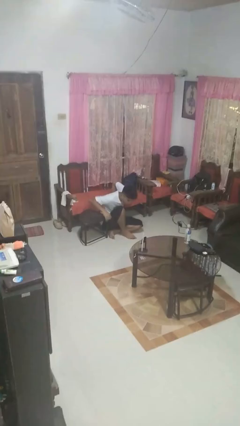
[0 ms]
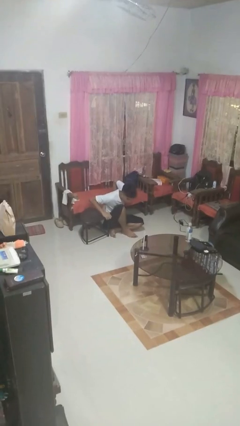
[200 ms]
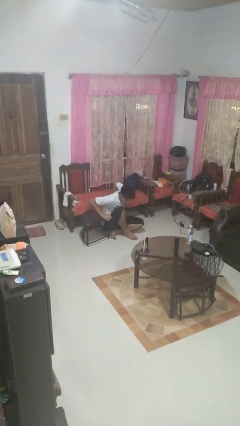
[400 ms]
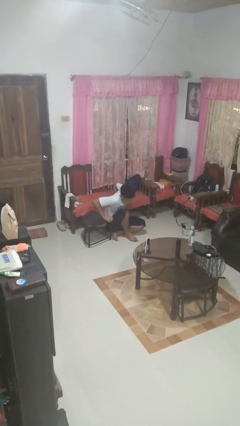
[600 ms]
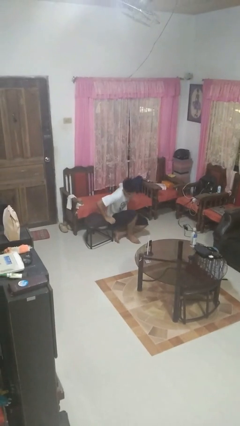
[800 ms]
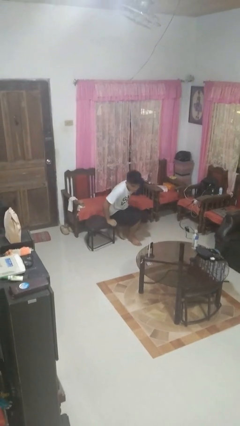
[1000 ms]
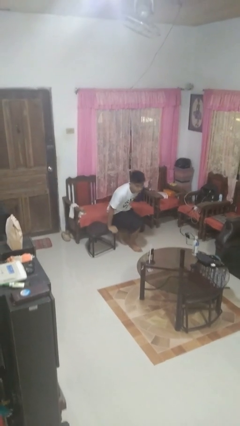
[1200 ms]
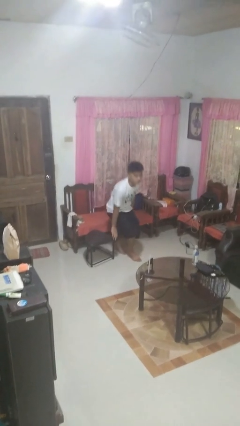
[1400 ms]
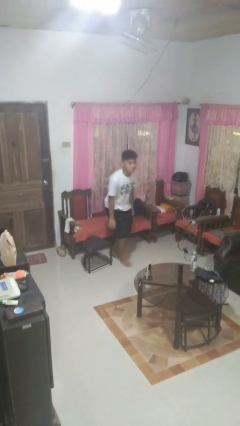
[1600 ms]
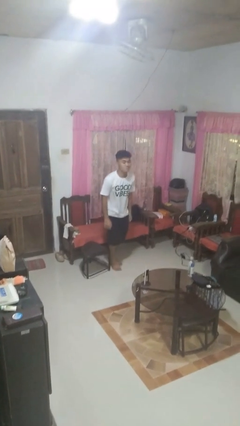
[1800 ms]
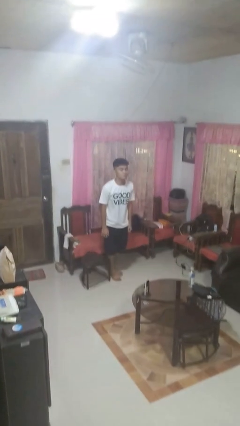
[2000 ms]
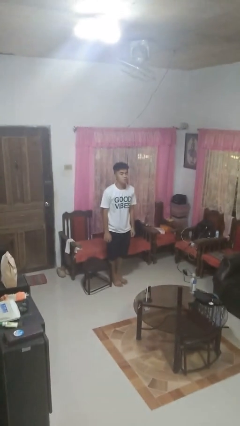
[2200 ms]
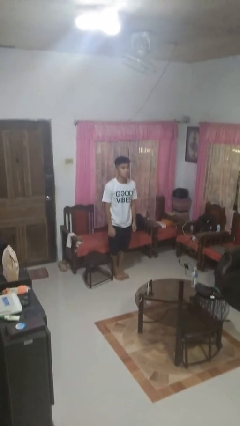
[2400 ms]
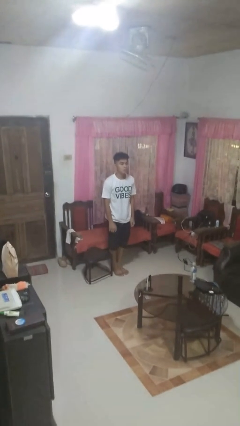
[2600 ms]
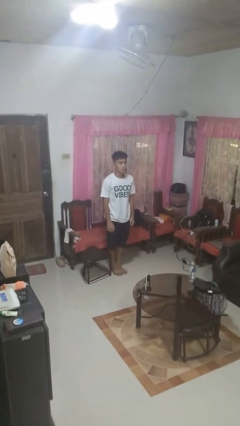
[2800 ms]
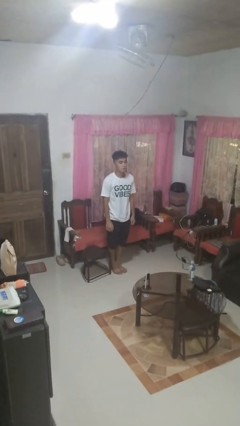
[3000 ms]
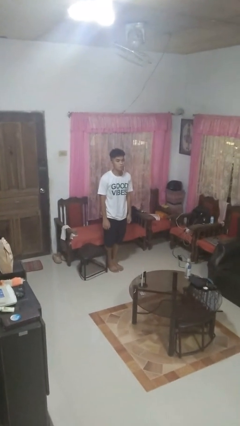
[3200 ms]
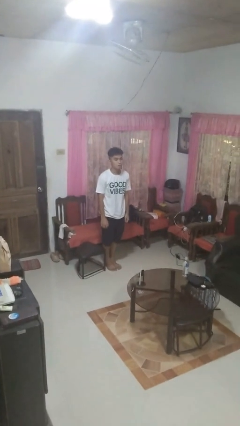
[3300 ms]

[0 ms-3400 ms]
person stands up from floor

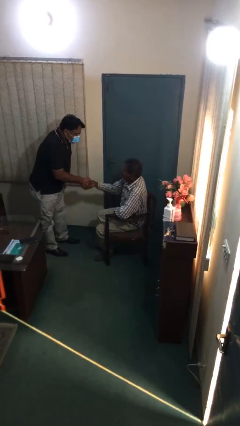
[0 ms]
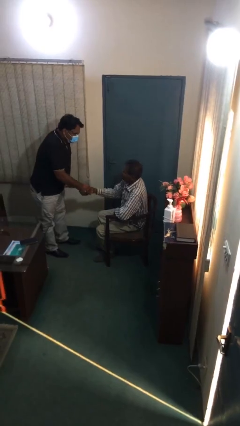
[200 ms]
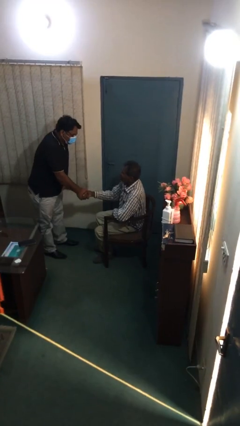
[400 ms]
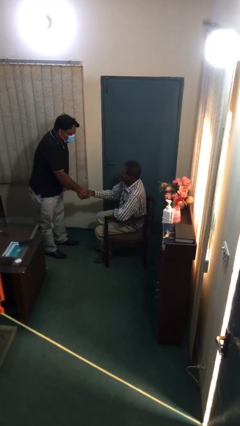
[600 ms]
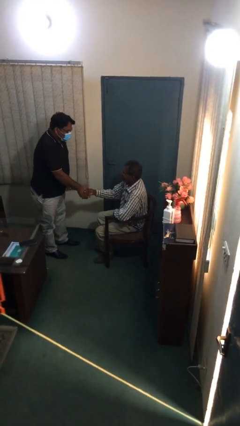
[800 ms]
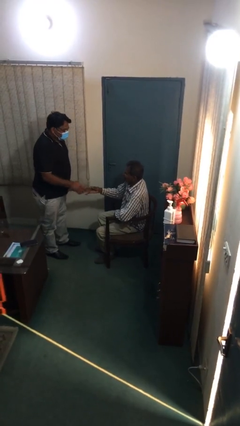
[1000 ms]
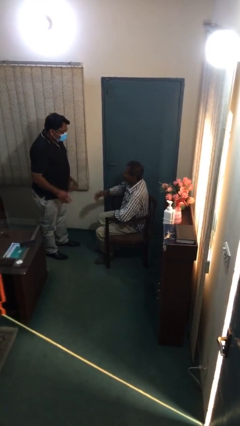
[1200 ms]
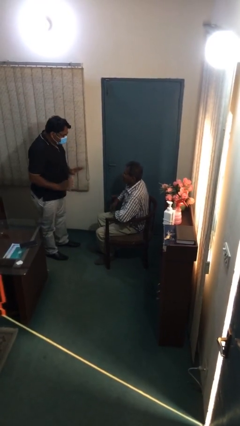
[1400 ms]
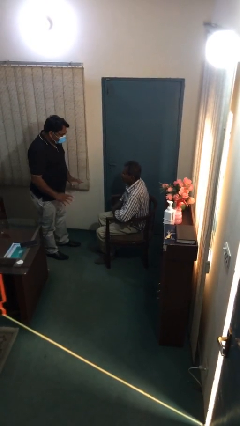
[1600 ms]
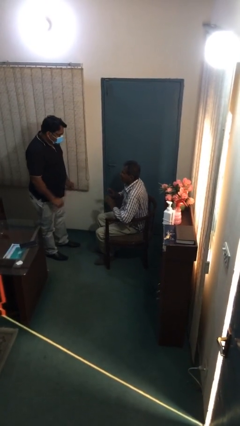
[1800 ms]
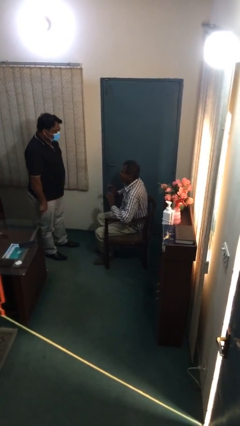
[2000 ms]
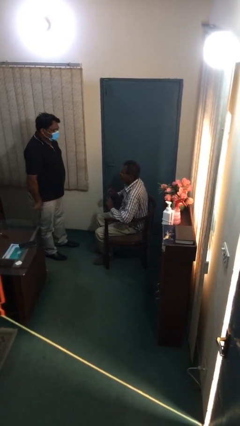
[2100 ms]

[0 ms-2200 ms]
person shakes hand

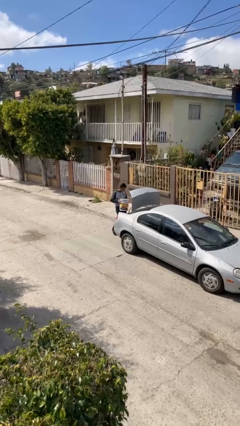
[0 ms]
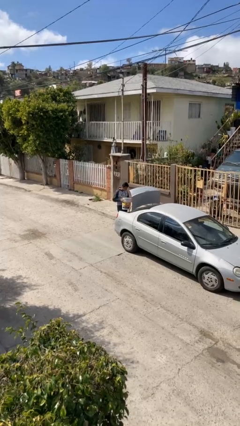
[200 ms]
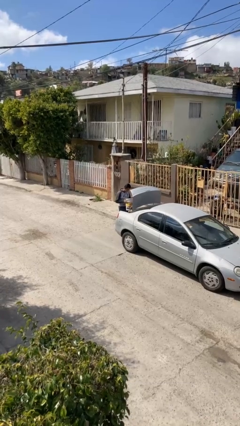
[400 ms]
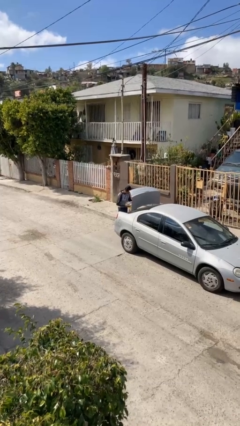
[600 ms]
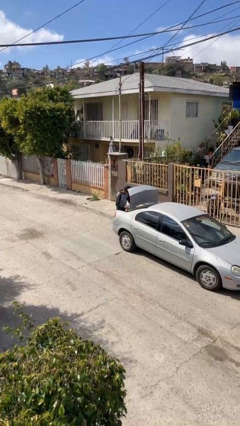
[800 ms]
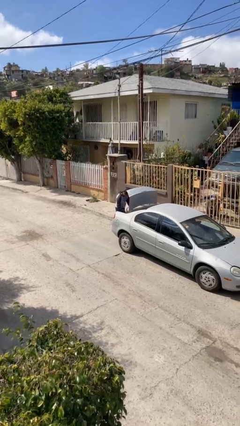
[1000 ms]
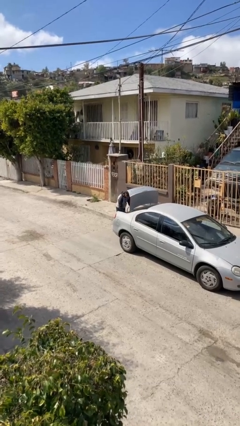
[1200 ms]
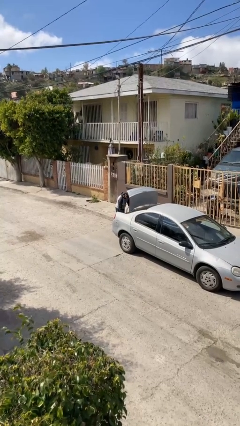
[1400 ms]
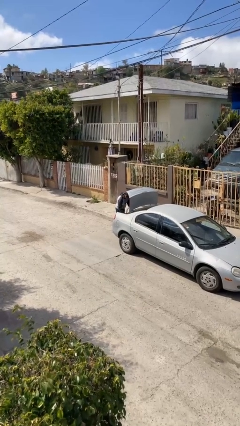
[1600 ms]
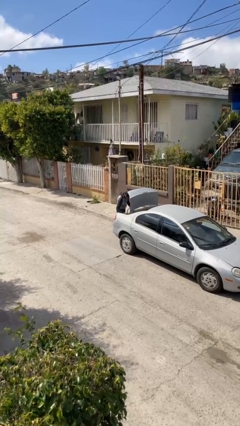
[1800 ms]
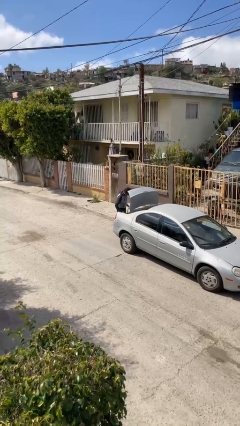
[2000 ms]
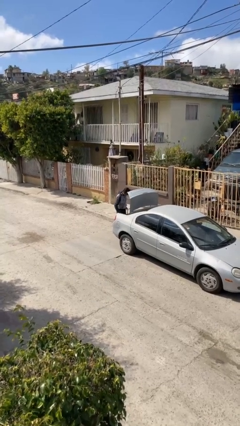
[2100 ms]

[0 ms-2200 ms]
person loads car

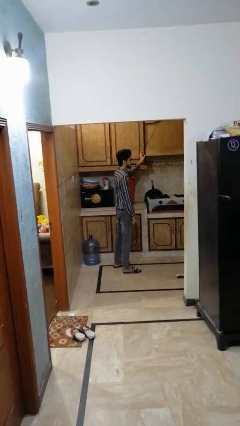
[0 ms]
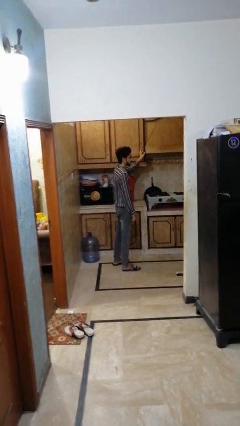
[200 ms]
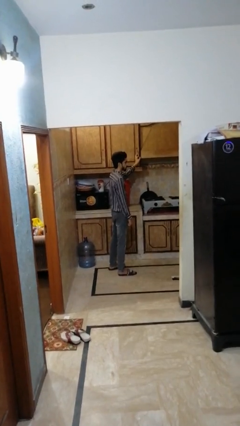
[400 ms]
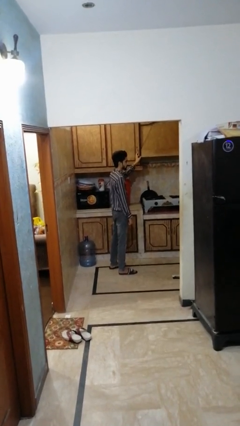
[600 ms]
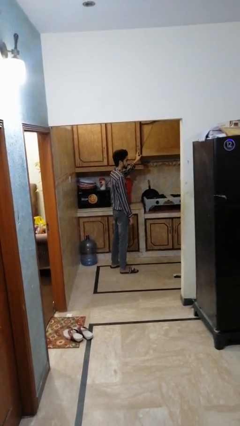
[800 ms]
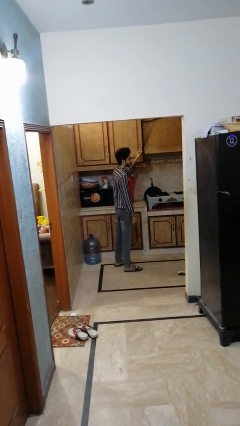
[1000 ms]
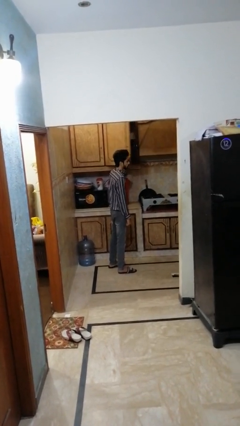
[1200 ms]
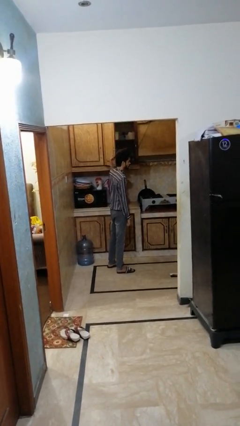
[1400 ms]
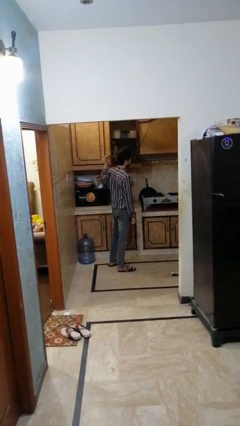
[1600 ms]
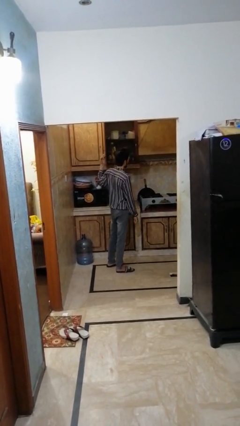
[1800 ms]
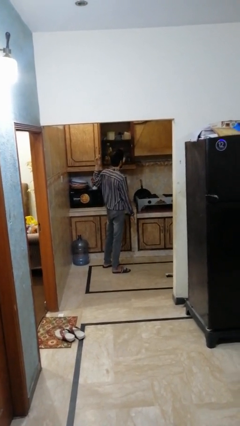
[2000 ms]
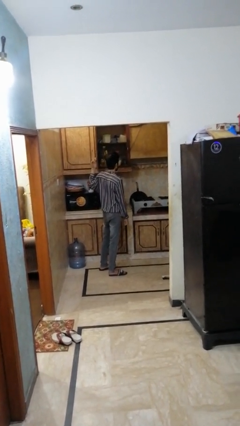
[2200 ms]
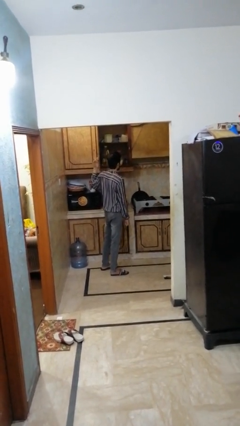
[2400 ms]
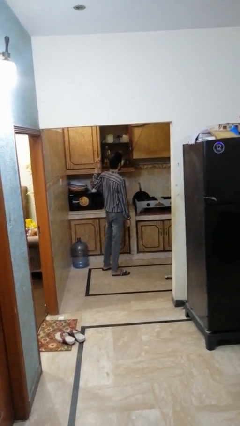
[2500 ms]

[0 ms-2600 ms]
person opens cabinet

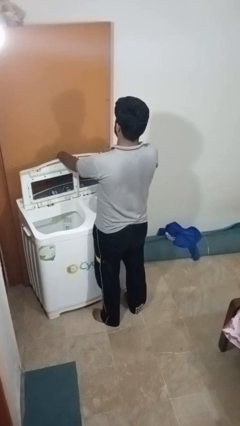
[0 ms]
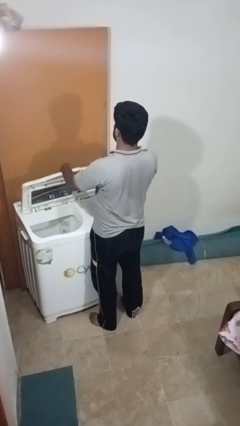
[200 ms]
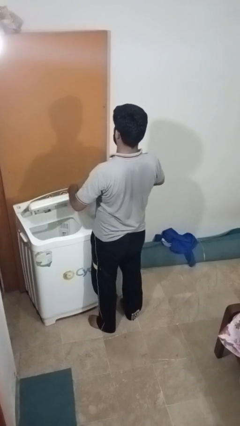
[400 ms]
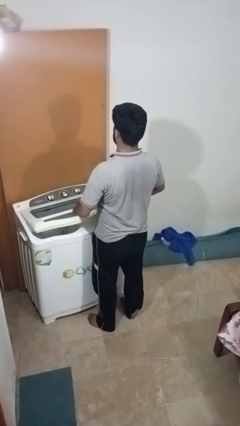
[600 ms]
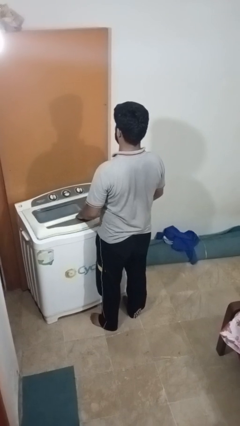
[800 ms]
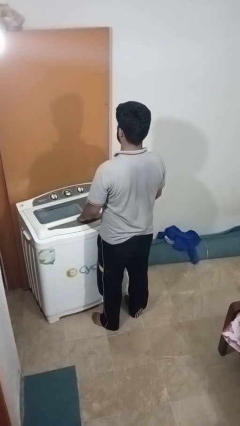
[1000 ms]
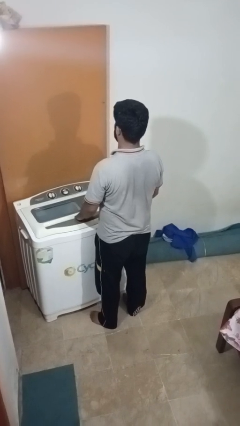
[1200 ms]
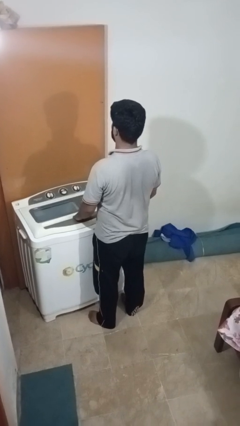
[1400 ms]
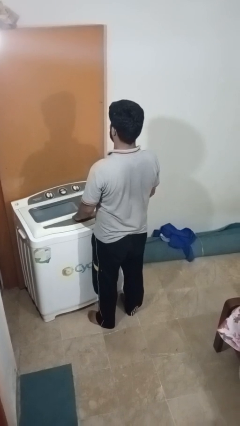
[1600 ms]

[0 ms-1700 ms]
person closes clothes washer

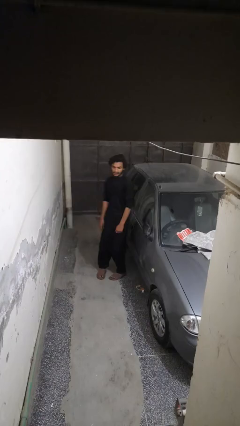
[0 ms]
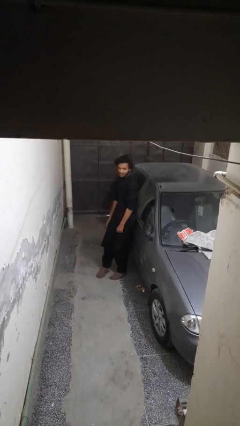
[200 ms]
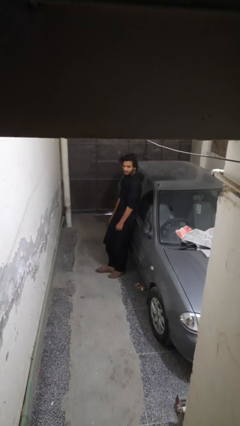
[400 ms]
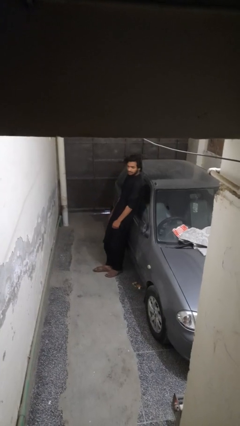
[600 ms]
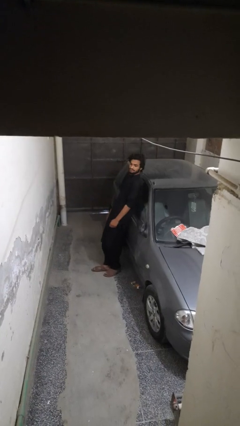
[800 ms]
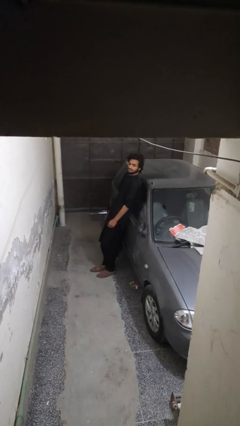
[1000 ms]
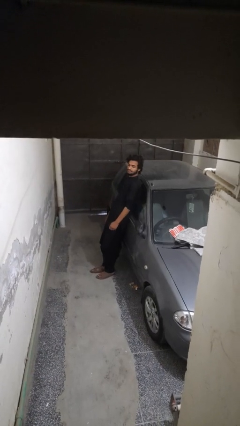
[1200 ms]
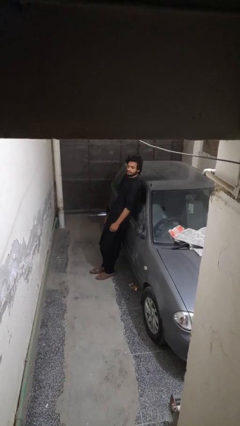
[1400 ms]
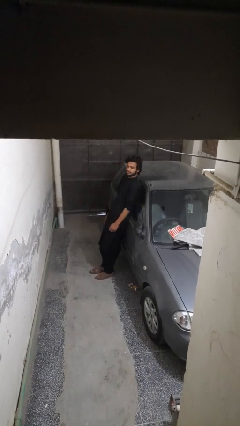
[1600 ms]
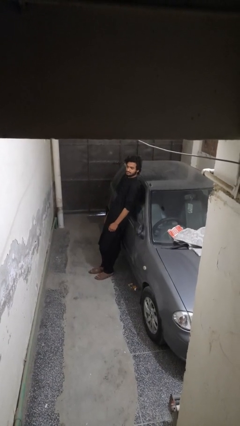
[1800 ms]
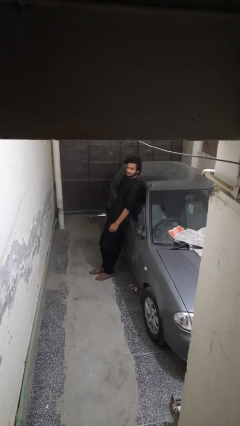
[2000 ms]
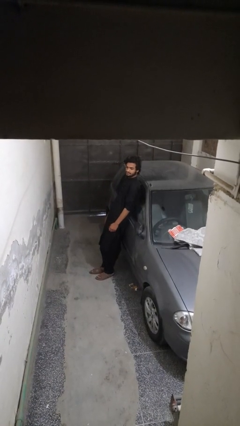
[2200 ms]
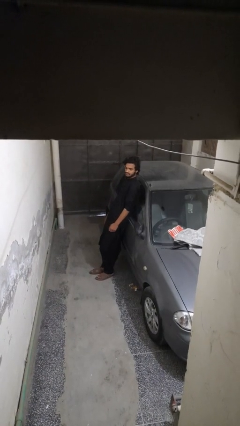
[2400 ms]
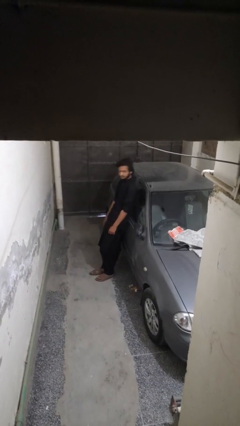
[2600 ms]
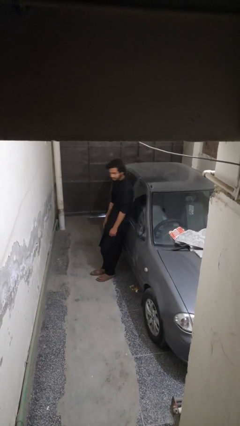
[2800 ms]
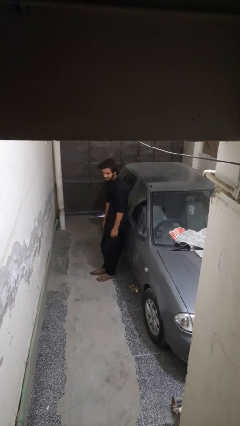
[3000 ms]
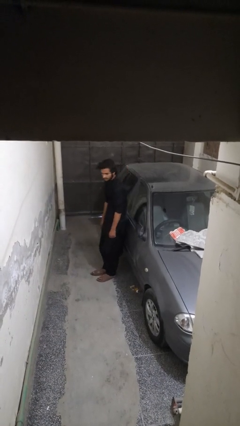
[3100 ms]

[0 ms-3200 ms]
person leans against car

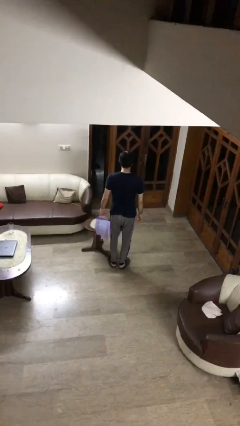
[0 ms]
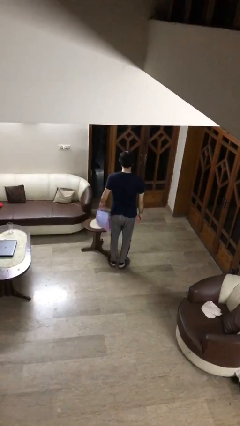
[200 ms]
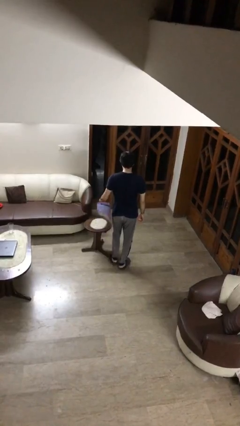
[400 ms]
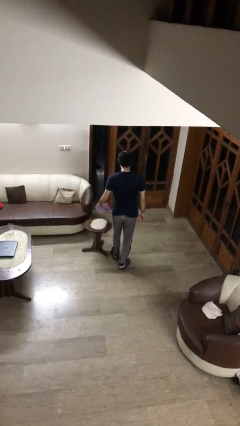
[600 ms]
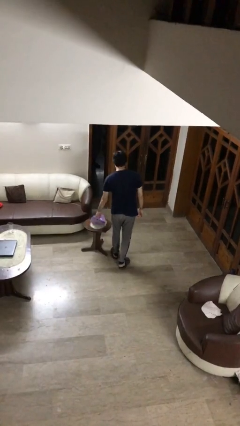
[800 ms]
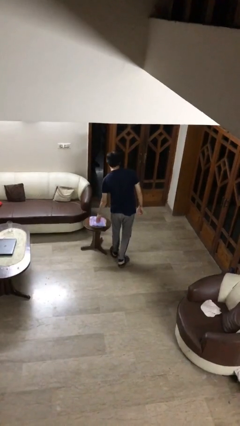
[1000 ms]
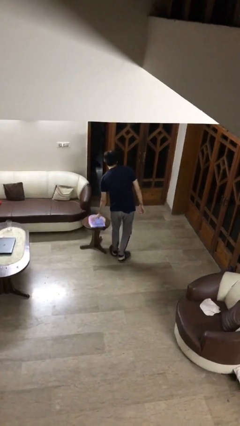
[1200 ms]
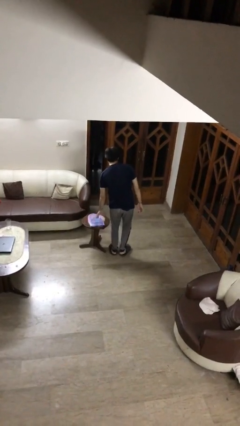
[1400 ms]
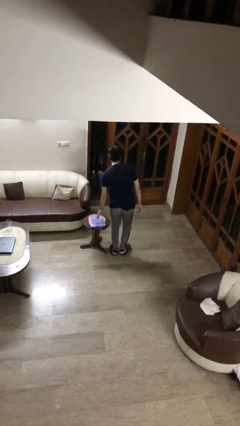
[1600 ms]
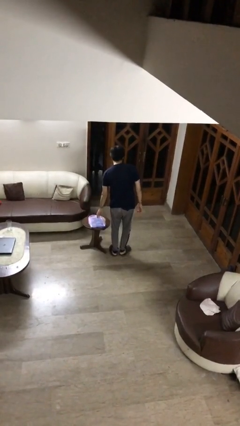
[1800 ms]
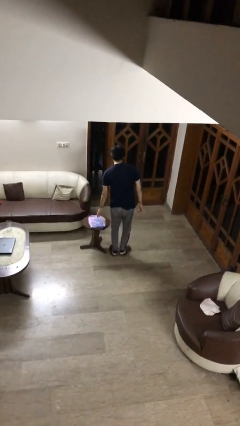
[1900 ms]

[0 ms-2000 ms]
person puts down object on table

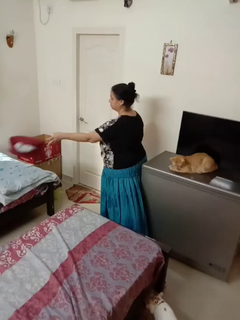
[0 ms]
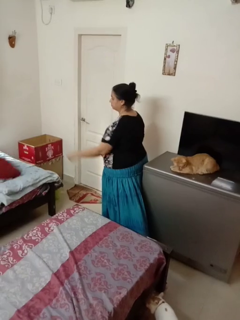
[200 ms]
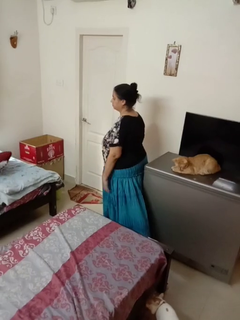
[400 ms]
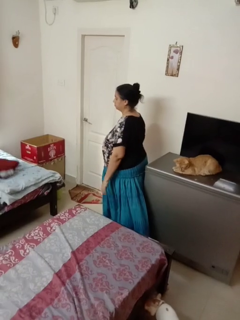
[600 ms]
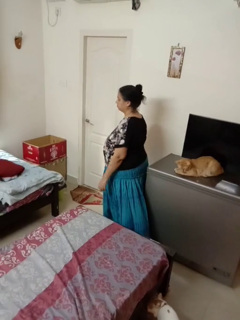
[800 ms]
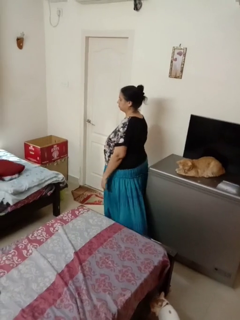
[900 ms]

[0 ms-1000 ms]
person throws object on bed
